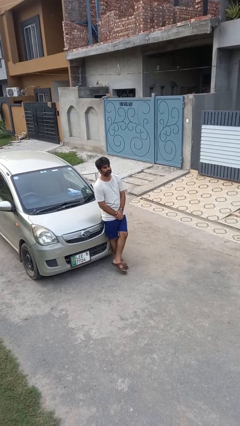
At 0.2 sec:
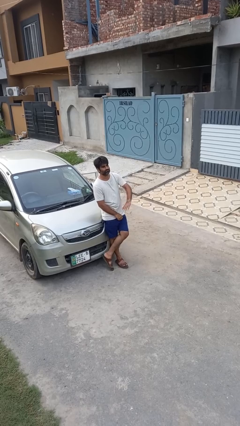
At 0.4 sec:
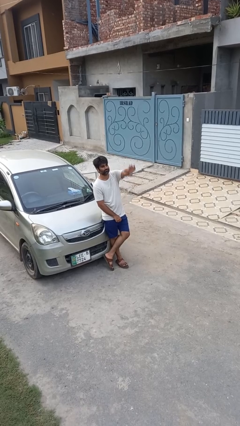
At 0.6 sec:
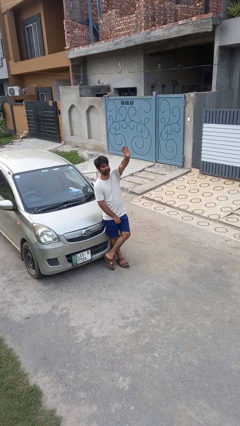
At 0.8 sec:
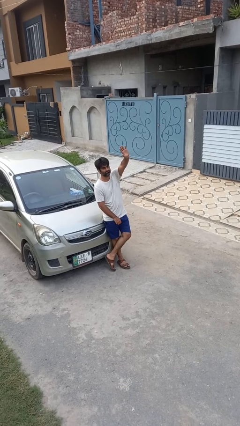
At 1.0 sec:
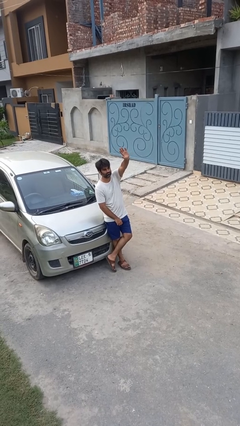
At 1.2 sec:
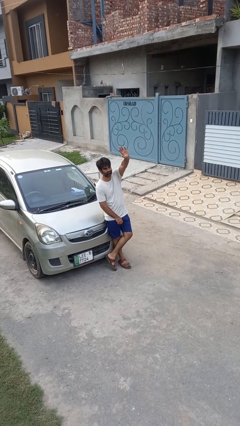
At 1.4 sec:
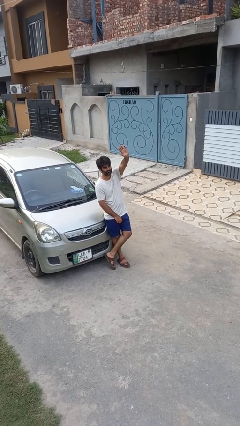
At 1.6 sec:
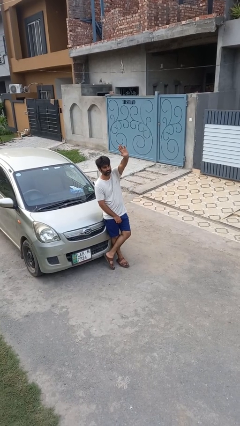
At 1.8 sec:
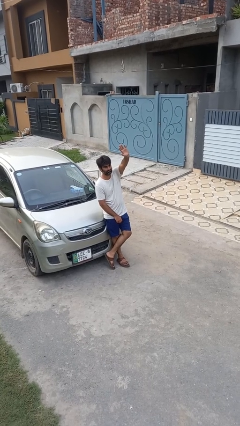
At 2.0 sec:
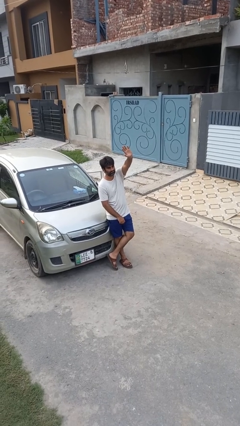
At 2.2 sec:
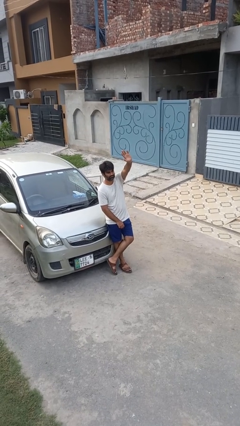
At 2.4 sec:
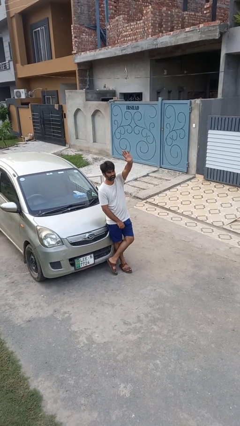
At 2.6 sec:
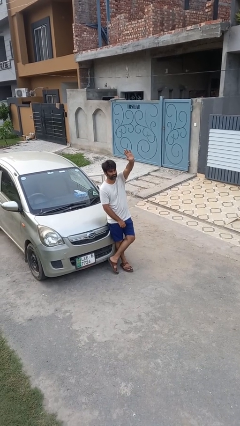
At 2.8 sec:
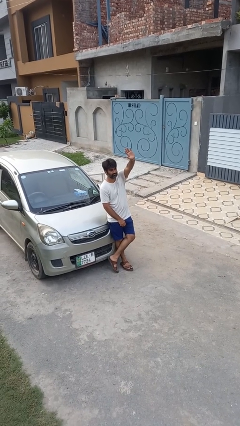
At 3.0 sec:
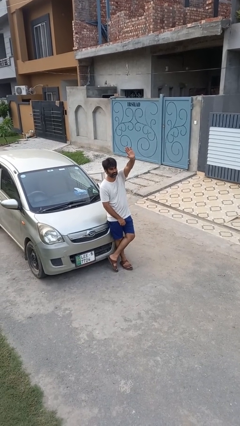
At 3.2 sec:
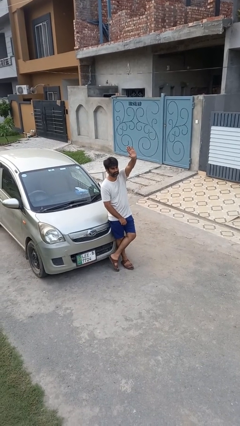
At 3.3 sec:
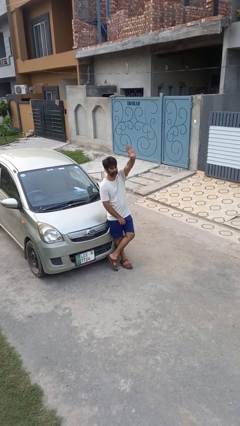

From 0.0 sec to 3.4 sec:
person gestures raise hand

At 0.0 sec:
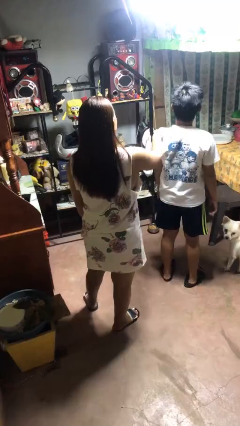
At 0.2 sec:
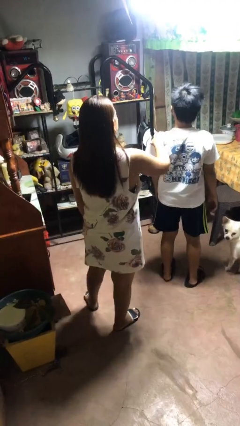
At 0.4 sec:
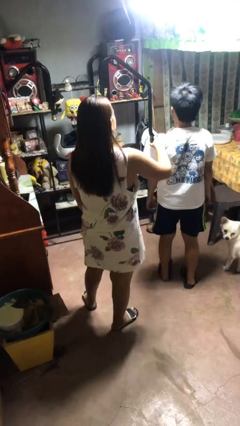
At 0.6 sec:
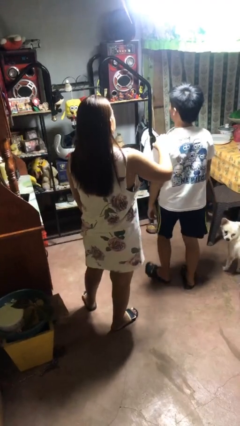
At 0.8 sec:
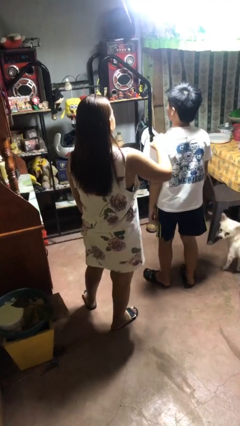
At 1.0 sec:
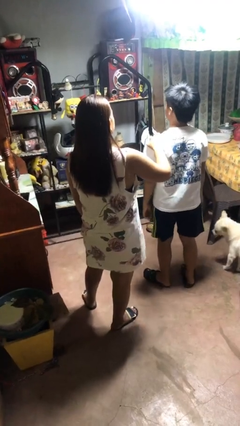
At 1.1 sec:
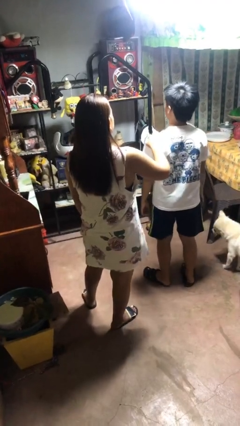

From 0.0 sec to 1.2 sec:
person grabs person by shoulder

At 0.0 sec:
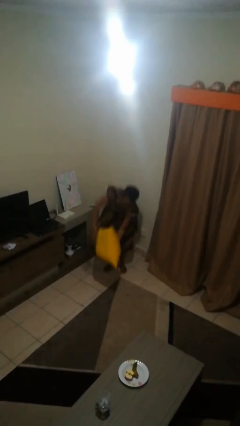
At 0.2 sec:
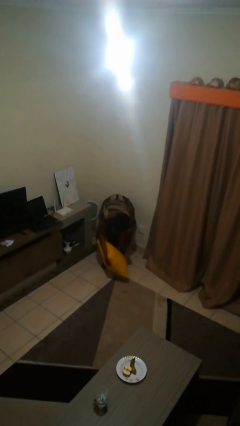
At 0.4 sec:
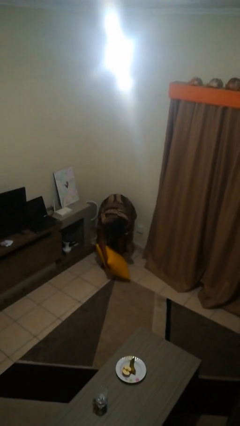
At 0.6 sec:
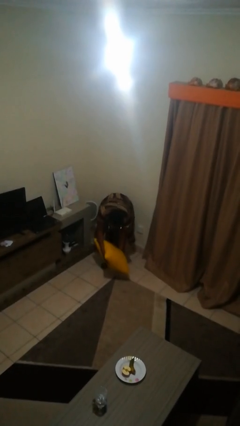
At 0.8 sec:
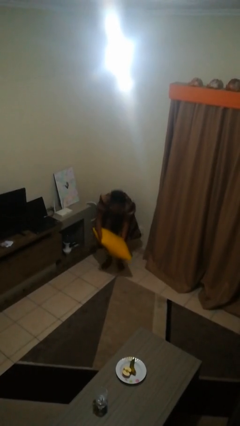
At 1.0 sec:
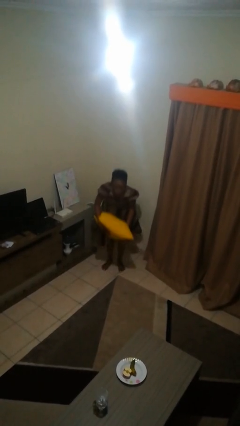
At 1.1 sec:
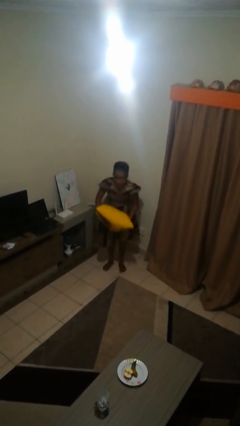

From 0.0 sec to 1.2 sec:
person catches dropped object

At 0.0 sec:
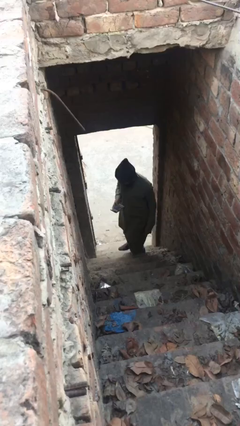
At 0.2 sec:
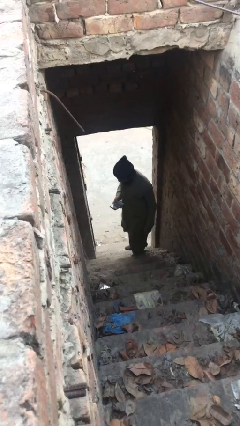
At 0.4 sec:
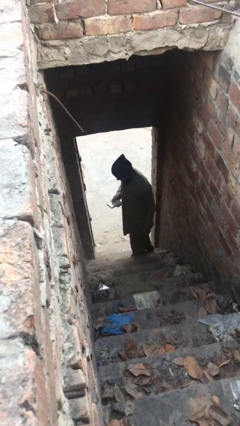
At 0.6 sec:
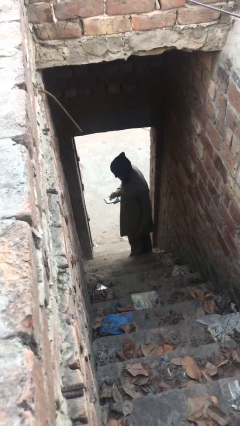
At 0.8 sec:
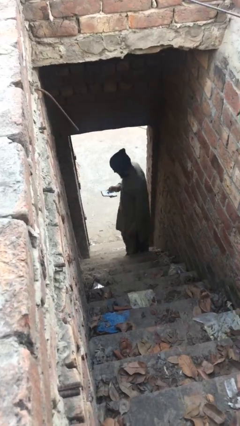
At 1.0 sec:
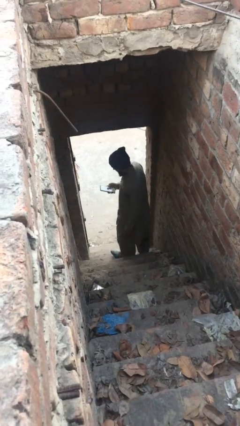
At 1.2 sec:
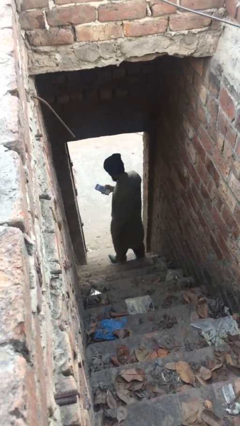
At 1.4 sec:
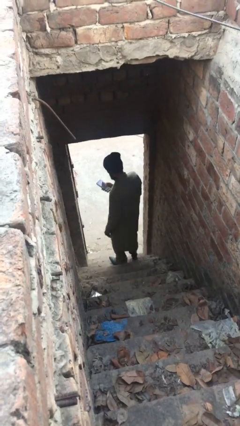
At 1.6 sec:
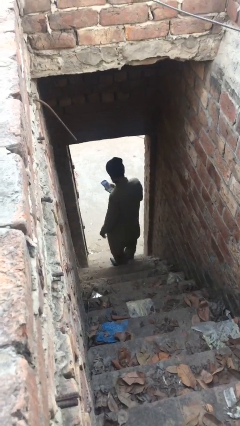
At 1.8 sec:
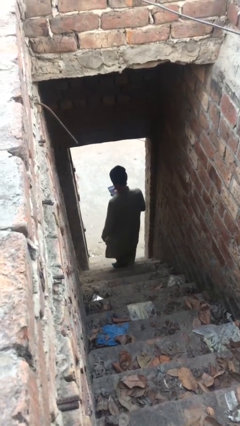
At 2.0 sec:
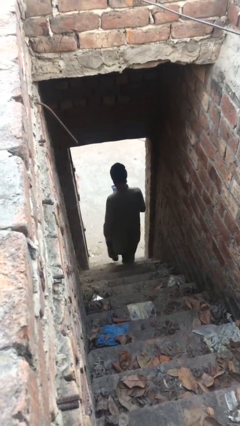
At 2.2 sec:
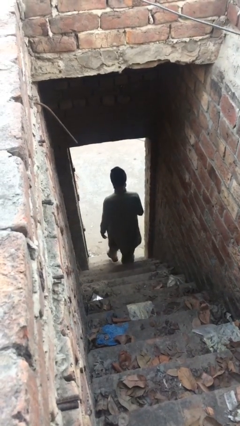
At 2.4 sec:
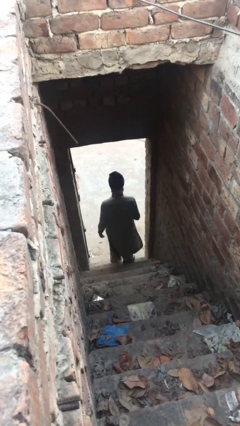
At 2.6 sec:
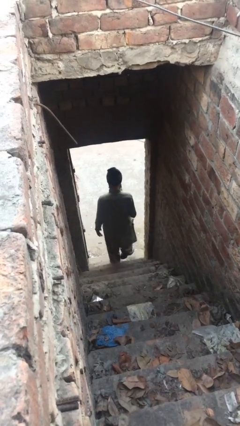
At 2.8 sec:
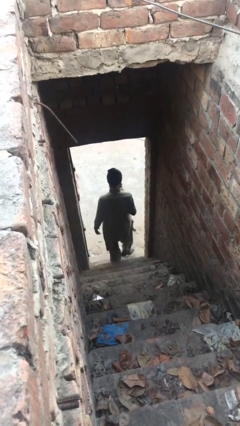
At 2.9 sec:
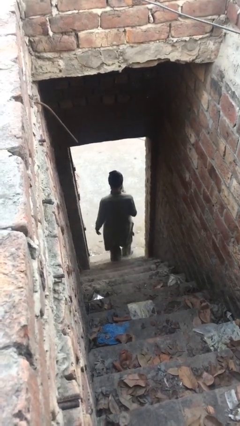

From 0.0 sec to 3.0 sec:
person exits scene through structure

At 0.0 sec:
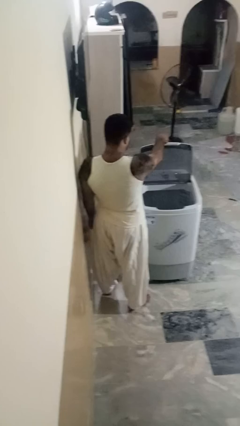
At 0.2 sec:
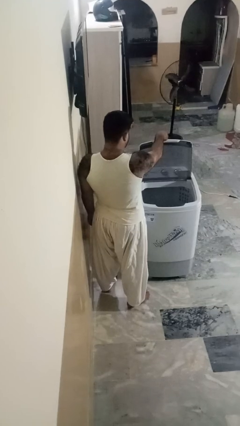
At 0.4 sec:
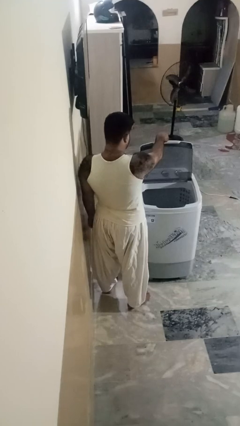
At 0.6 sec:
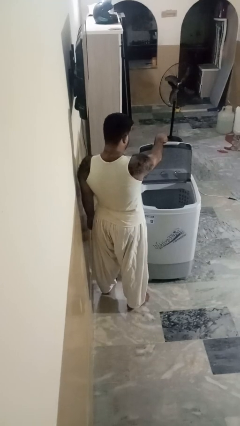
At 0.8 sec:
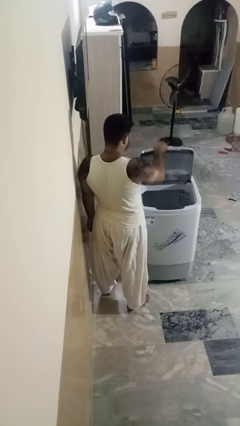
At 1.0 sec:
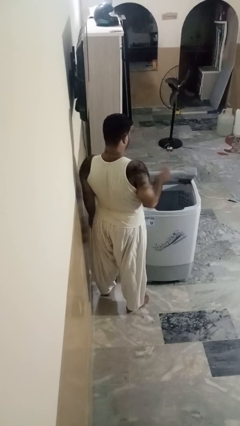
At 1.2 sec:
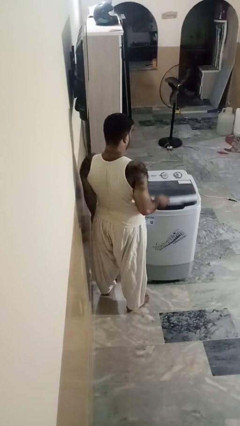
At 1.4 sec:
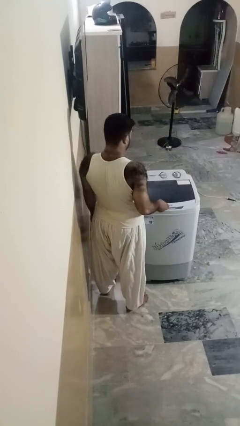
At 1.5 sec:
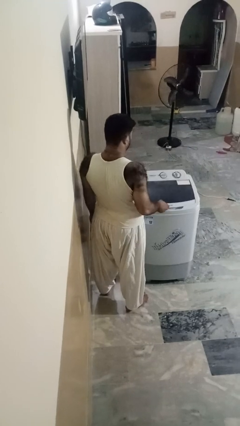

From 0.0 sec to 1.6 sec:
person closes clothes washer

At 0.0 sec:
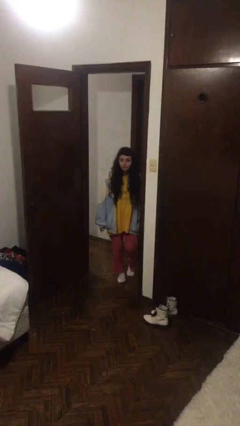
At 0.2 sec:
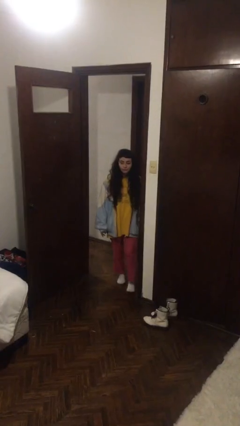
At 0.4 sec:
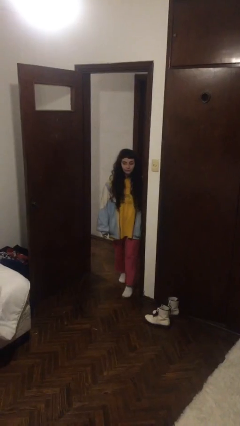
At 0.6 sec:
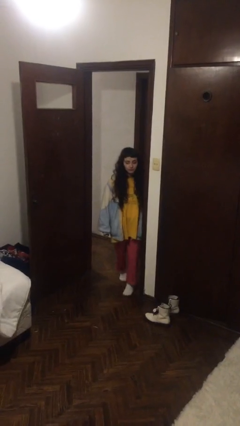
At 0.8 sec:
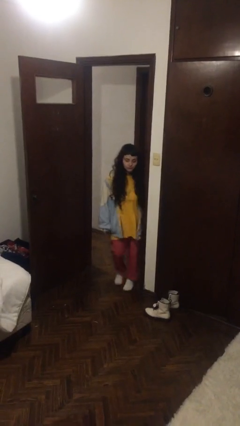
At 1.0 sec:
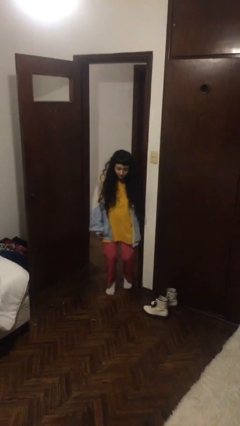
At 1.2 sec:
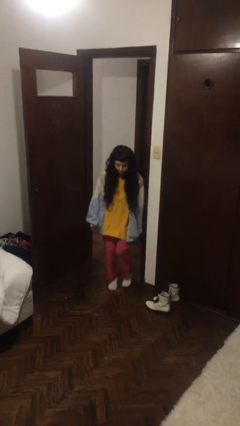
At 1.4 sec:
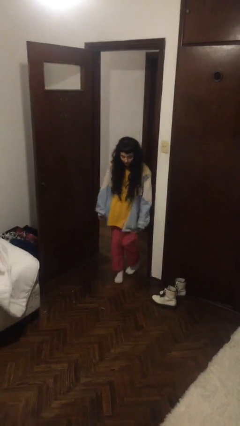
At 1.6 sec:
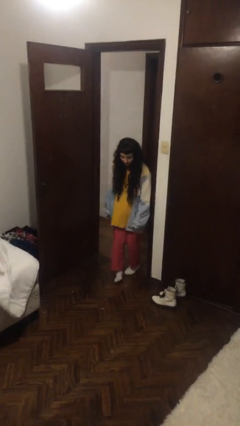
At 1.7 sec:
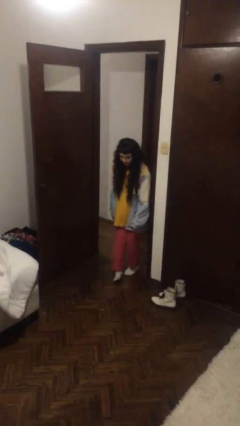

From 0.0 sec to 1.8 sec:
person bumps into wall

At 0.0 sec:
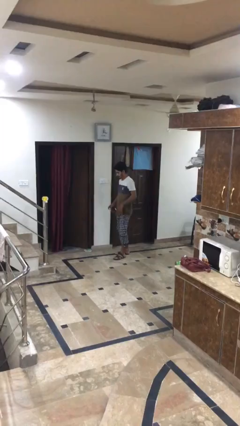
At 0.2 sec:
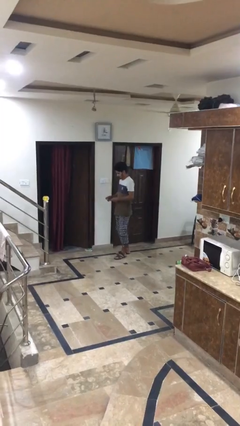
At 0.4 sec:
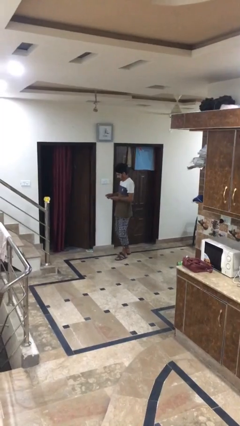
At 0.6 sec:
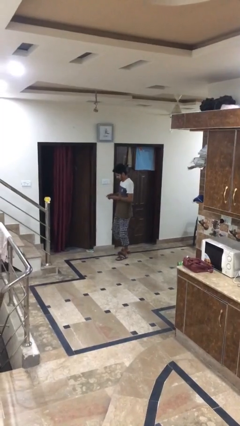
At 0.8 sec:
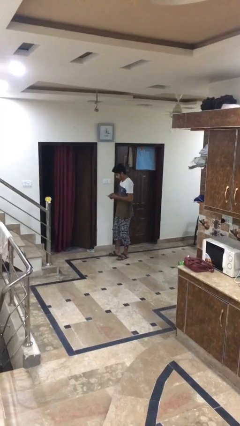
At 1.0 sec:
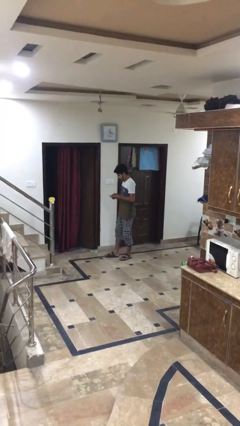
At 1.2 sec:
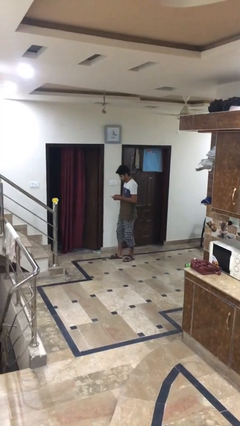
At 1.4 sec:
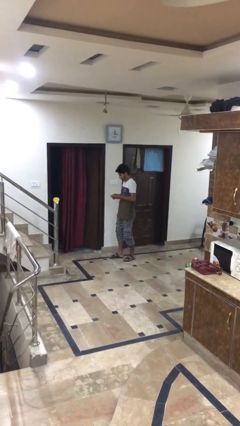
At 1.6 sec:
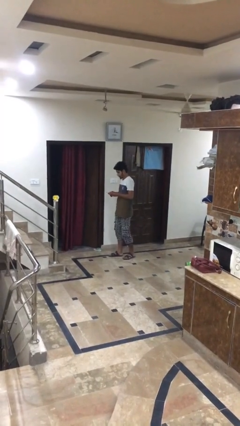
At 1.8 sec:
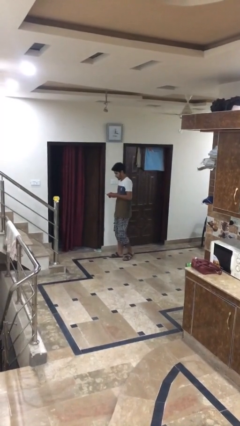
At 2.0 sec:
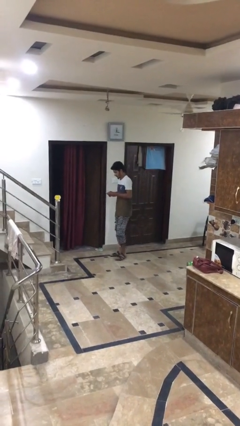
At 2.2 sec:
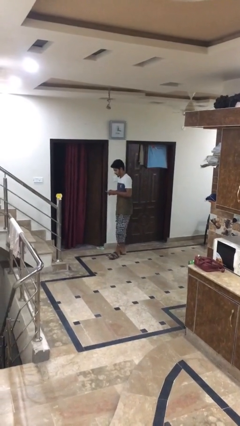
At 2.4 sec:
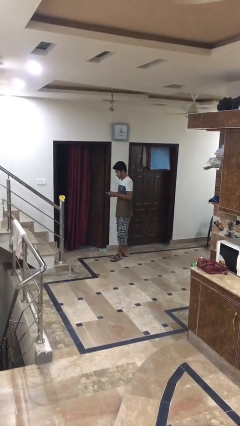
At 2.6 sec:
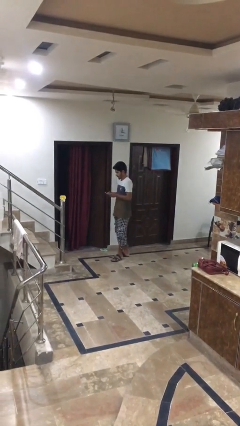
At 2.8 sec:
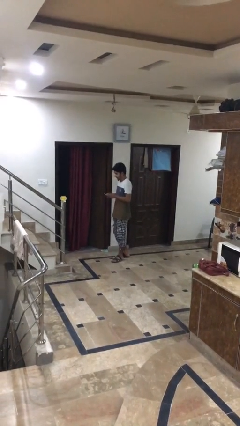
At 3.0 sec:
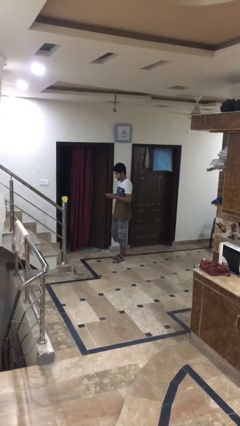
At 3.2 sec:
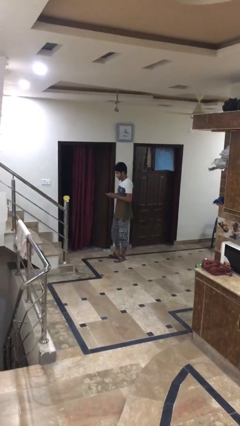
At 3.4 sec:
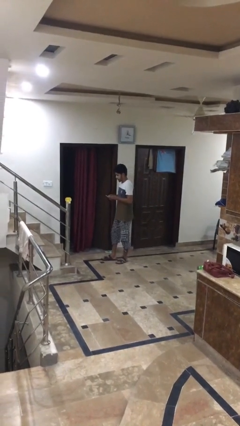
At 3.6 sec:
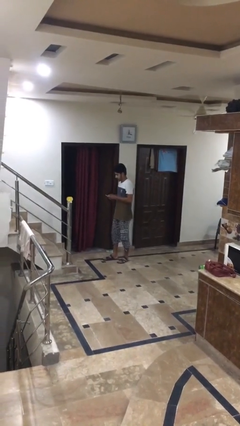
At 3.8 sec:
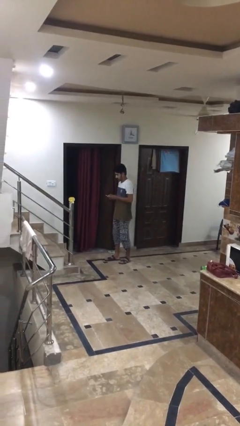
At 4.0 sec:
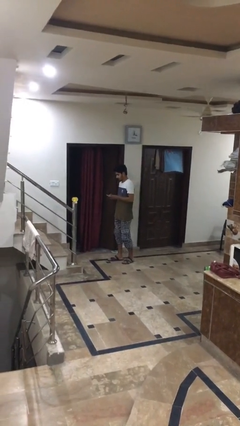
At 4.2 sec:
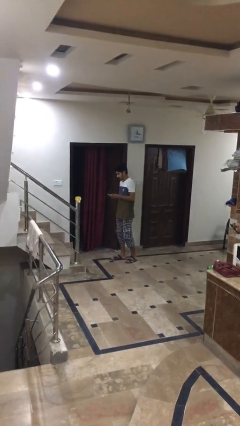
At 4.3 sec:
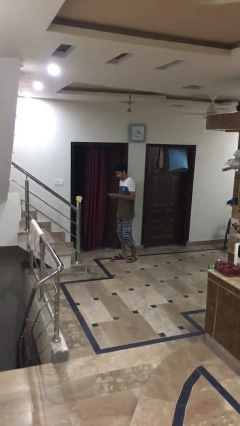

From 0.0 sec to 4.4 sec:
person texts on phone
